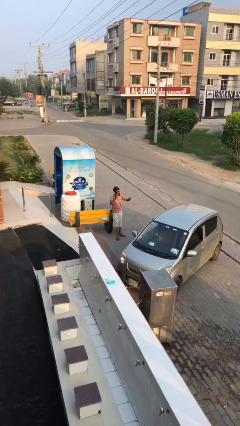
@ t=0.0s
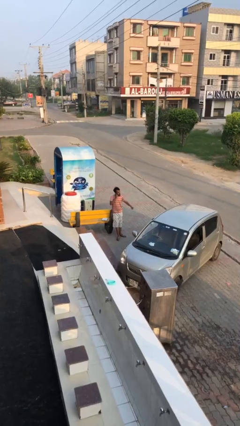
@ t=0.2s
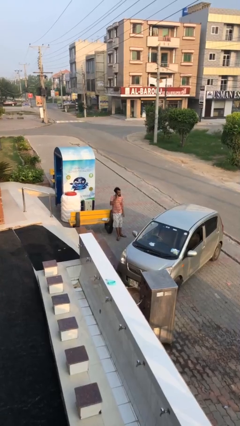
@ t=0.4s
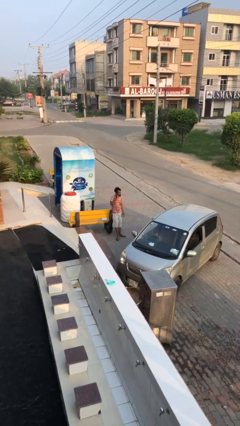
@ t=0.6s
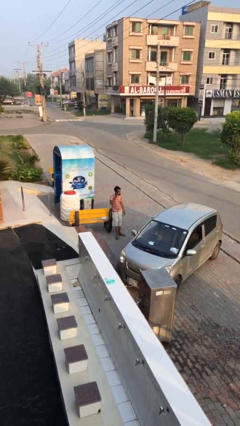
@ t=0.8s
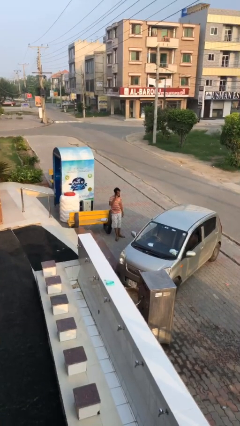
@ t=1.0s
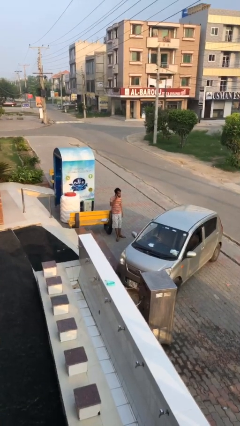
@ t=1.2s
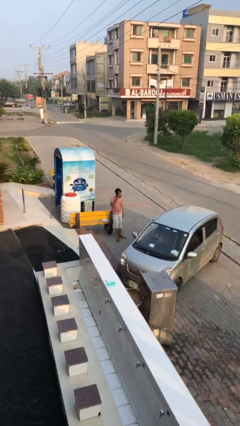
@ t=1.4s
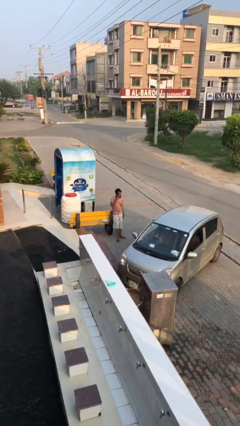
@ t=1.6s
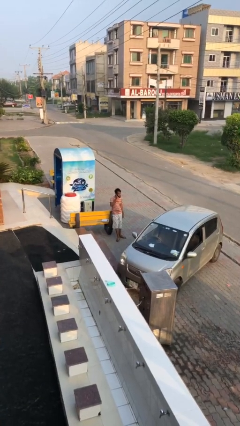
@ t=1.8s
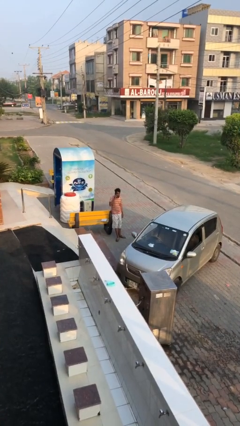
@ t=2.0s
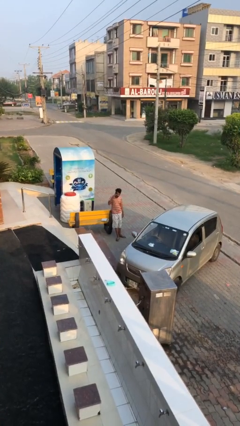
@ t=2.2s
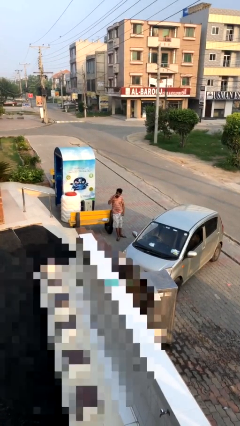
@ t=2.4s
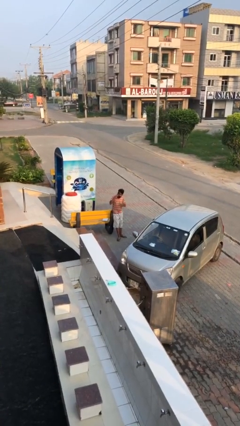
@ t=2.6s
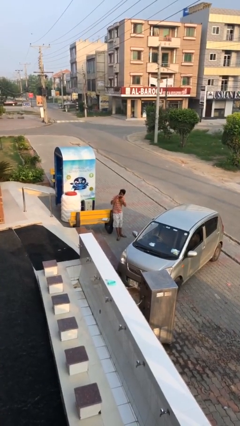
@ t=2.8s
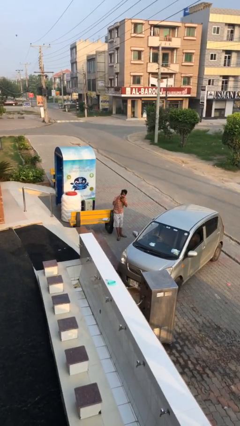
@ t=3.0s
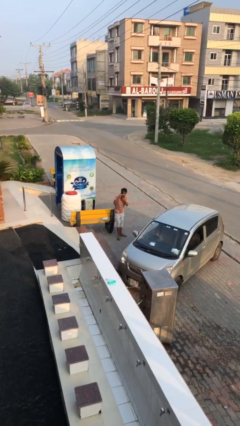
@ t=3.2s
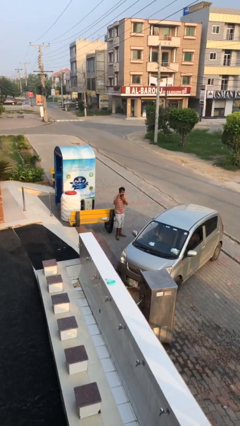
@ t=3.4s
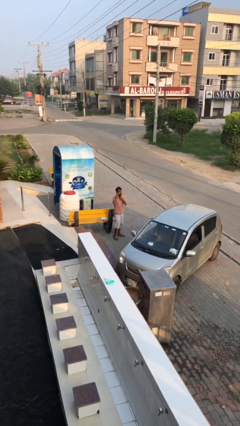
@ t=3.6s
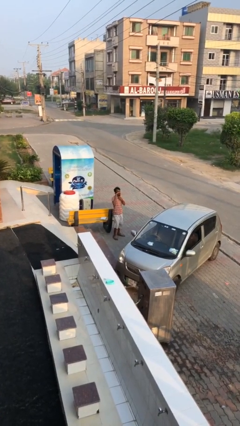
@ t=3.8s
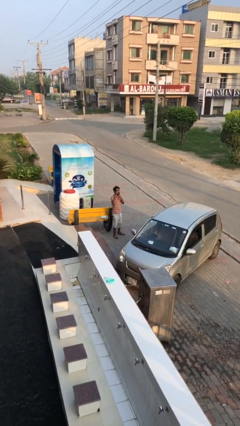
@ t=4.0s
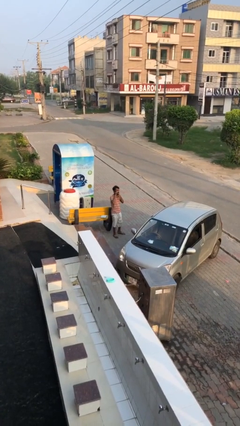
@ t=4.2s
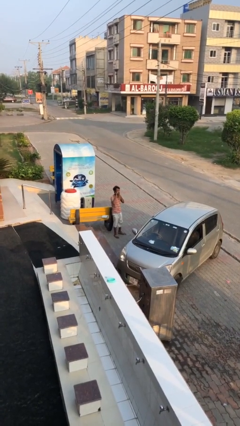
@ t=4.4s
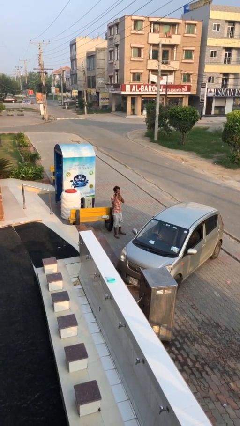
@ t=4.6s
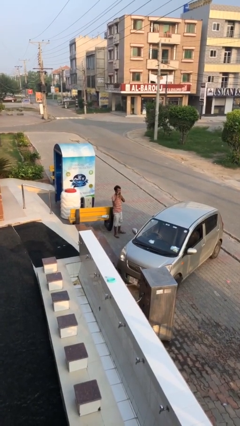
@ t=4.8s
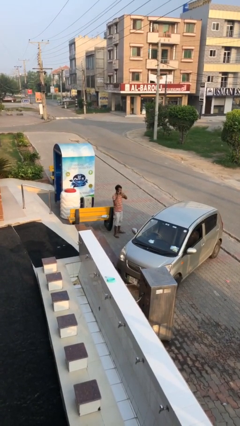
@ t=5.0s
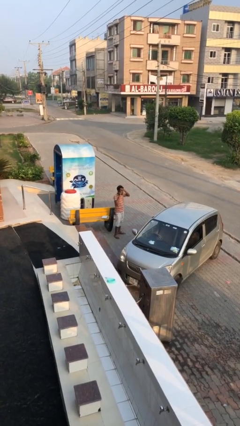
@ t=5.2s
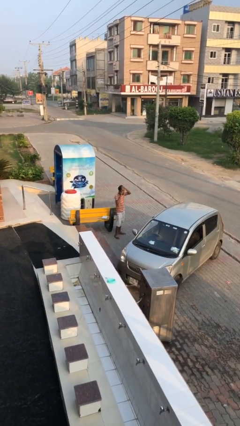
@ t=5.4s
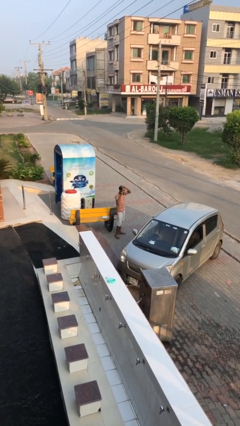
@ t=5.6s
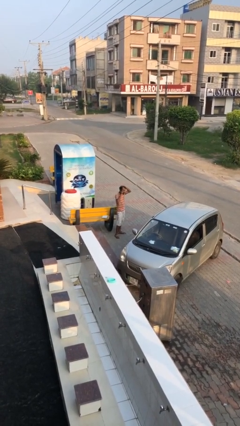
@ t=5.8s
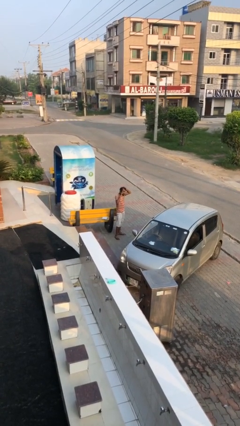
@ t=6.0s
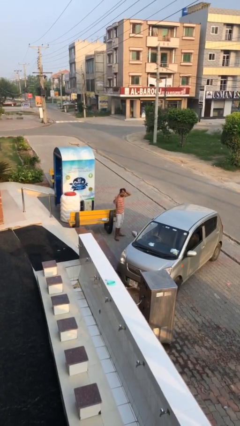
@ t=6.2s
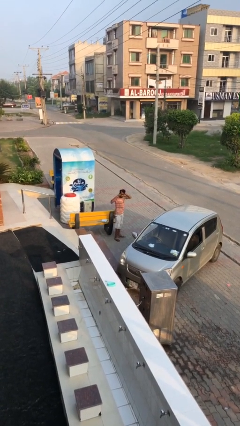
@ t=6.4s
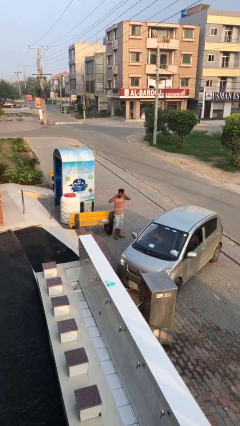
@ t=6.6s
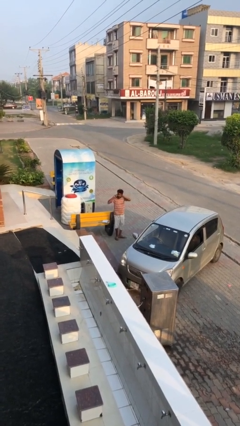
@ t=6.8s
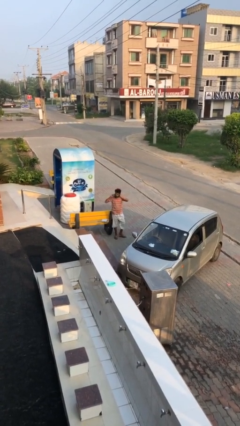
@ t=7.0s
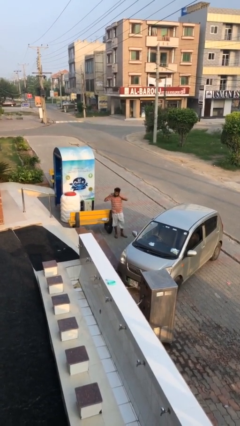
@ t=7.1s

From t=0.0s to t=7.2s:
person talks on phone

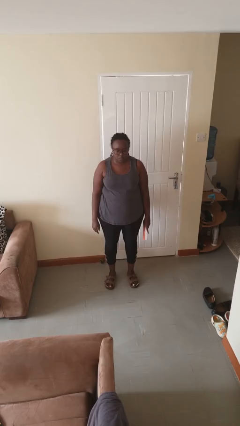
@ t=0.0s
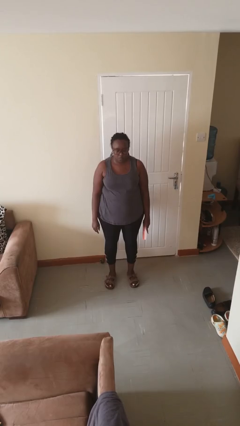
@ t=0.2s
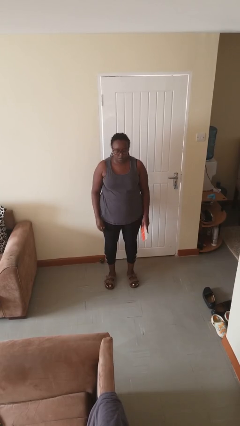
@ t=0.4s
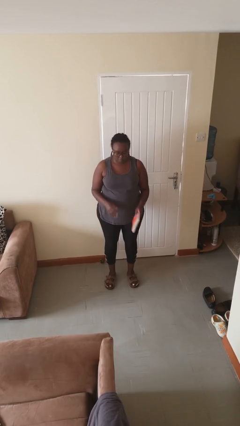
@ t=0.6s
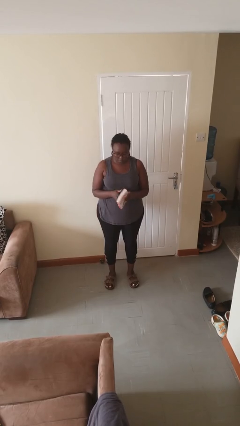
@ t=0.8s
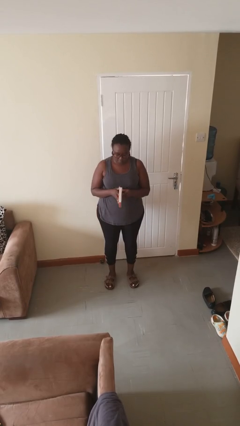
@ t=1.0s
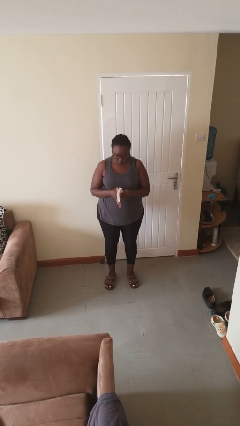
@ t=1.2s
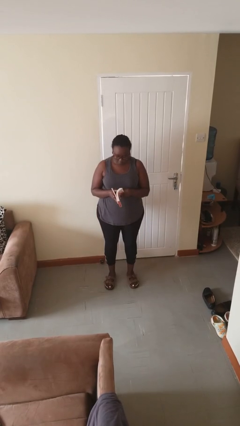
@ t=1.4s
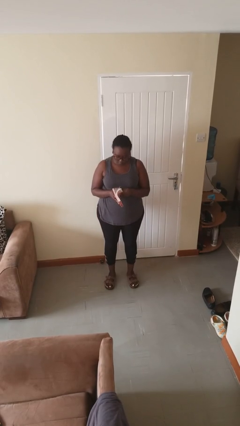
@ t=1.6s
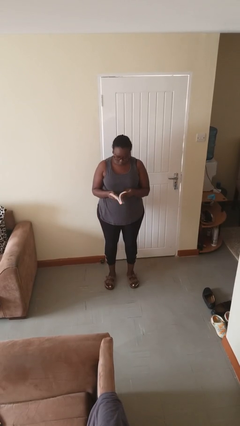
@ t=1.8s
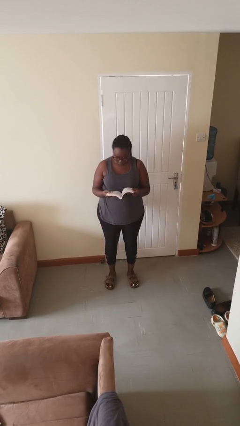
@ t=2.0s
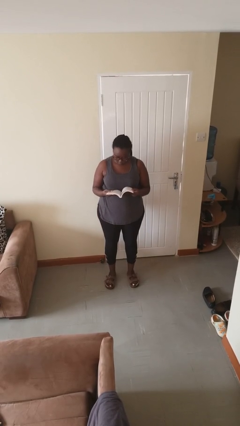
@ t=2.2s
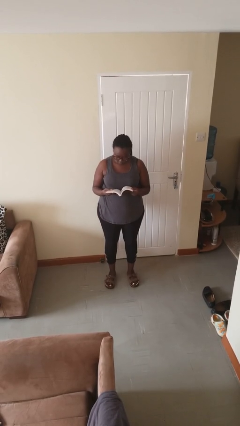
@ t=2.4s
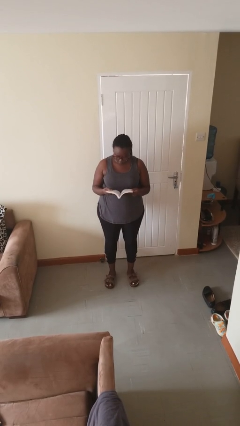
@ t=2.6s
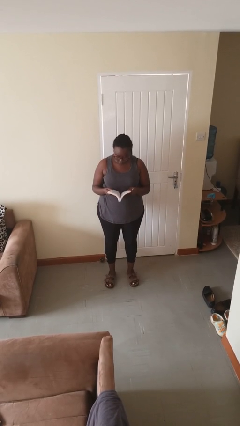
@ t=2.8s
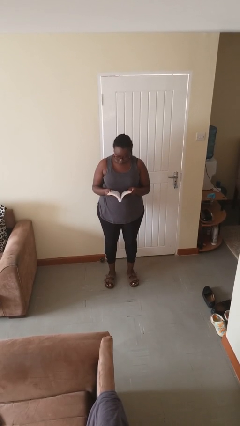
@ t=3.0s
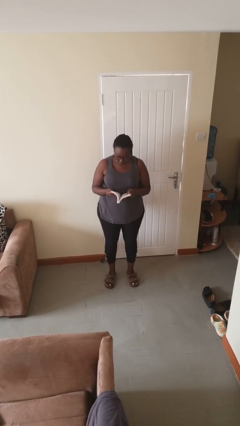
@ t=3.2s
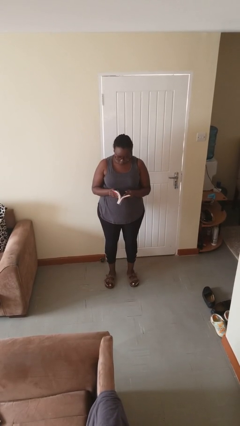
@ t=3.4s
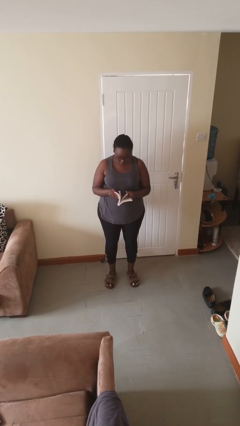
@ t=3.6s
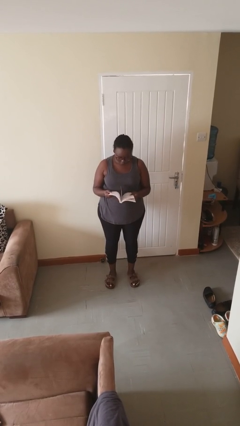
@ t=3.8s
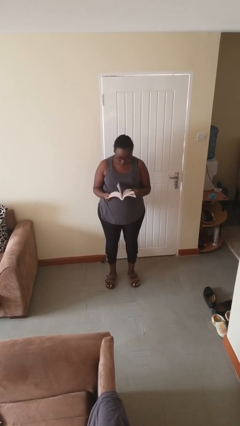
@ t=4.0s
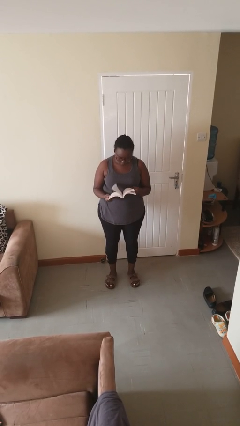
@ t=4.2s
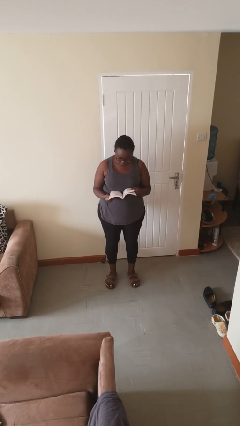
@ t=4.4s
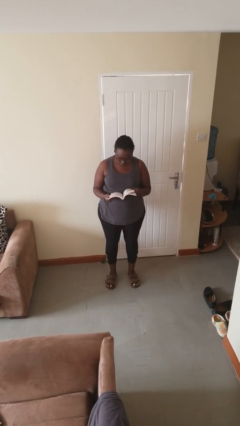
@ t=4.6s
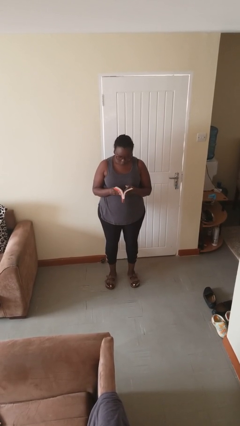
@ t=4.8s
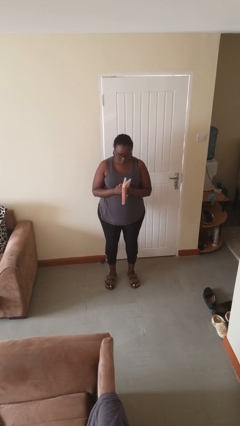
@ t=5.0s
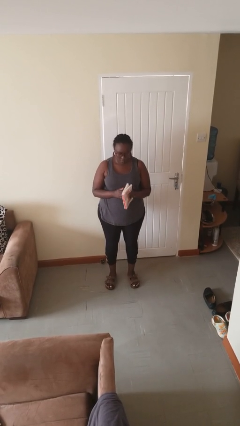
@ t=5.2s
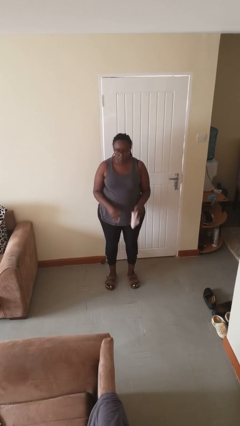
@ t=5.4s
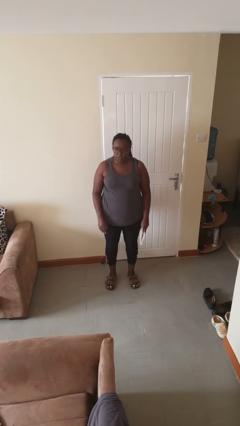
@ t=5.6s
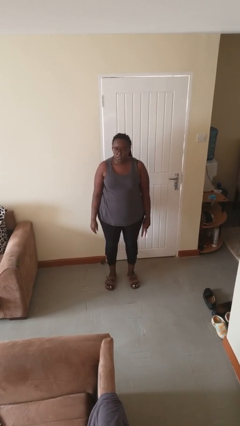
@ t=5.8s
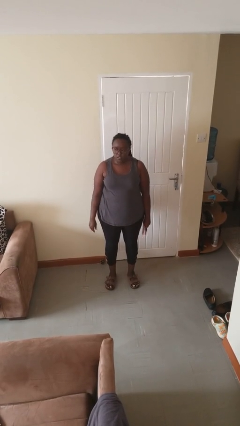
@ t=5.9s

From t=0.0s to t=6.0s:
person reads book

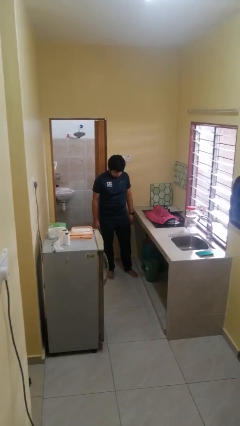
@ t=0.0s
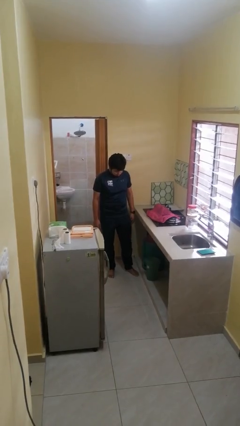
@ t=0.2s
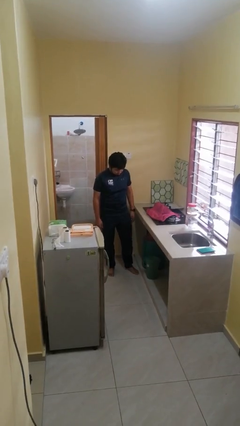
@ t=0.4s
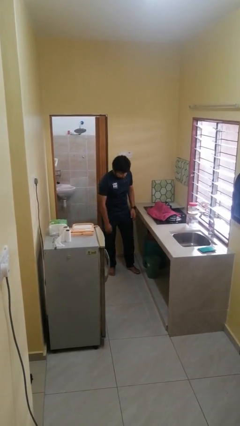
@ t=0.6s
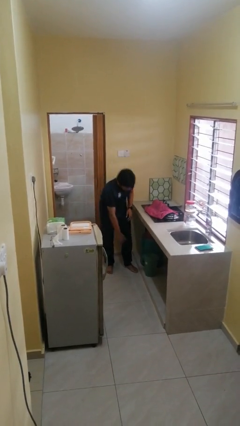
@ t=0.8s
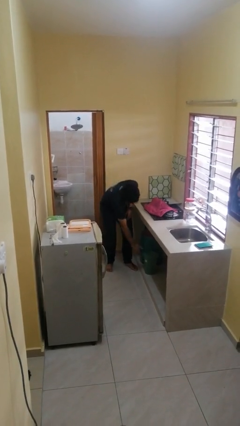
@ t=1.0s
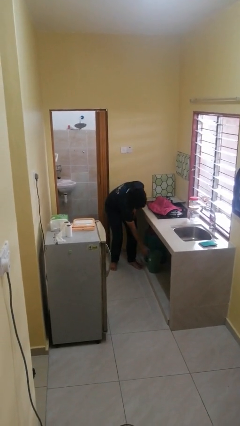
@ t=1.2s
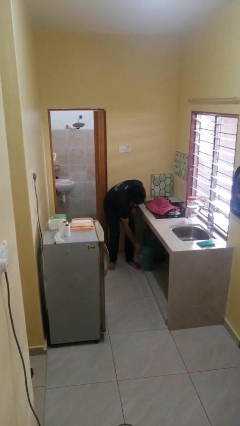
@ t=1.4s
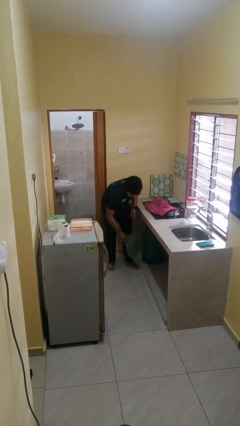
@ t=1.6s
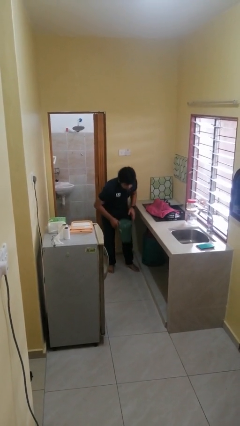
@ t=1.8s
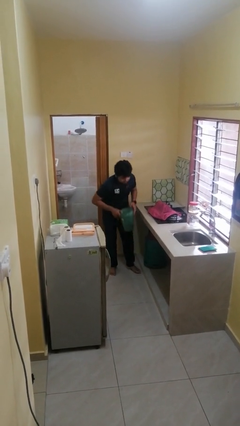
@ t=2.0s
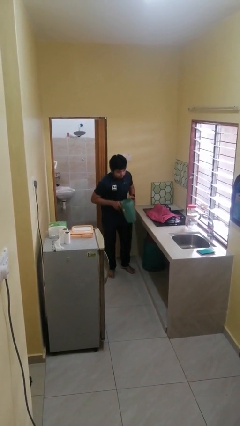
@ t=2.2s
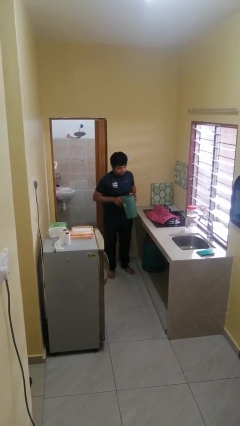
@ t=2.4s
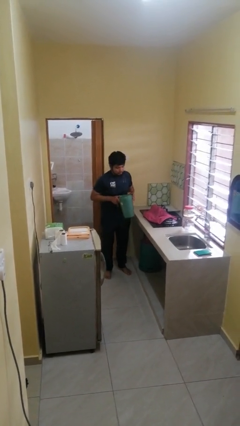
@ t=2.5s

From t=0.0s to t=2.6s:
person picks up object from cabinet

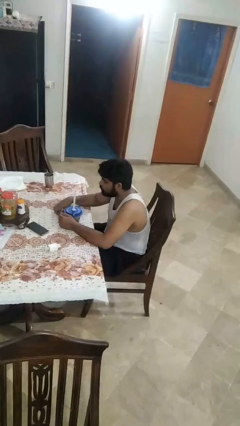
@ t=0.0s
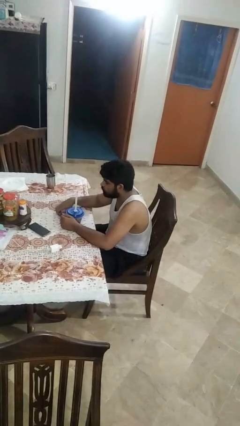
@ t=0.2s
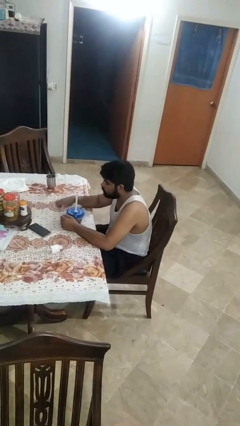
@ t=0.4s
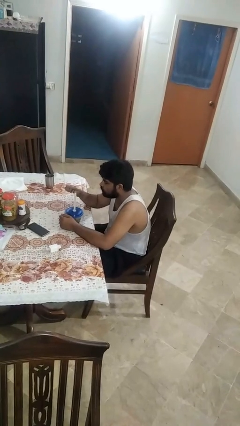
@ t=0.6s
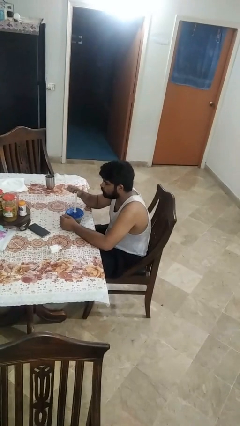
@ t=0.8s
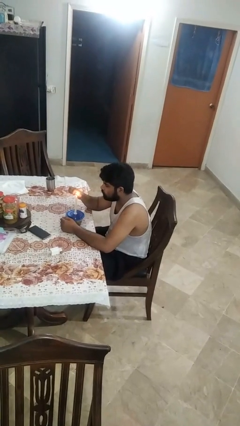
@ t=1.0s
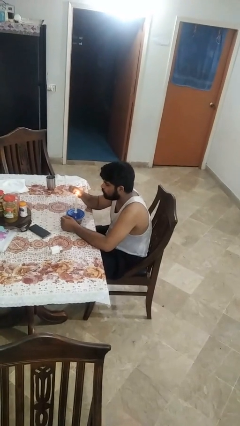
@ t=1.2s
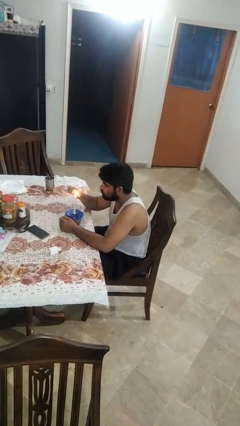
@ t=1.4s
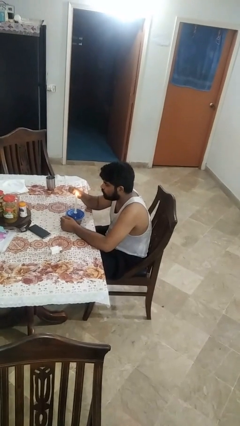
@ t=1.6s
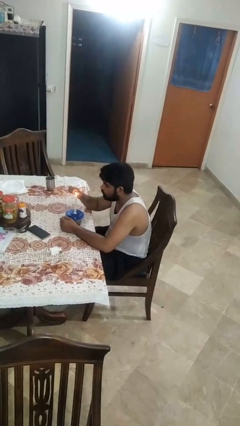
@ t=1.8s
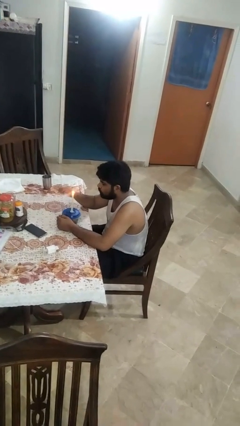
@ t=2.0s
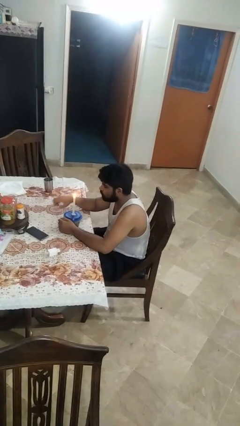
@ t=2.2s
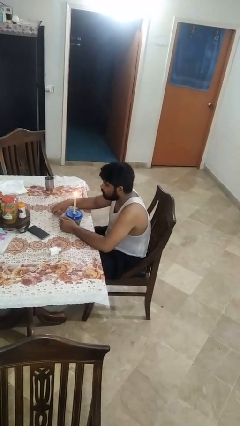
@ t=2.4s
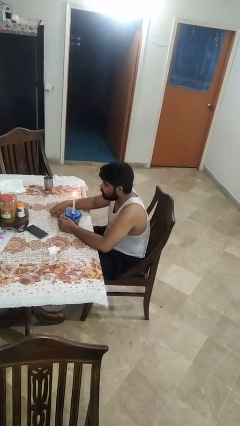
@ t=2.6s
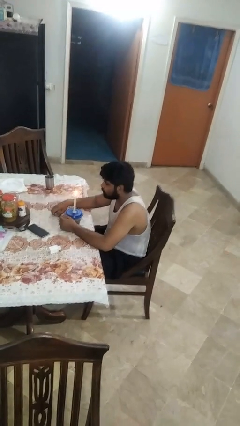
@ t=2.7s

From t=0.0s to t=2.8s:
person lights candle
